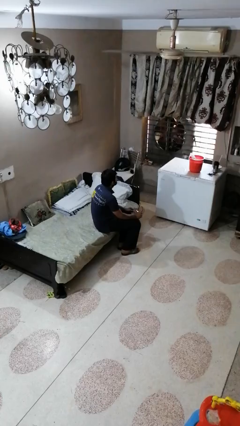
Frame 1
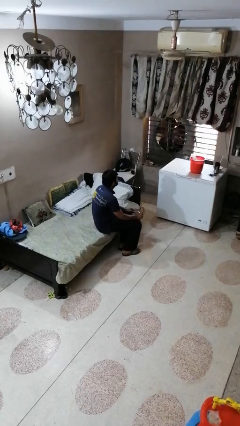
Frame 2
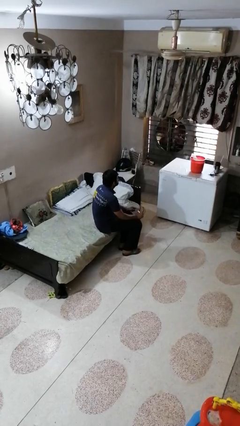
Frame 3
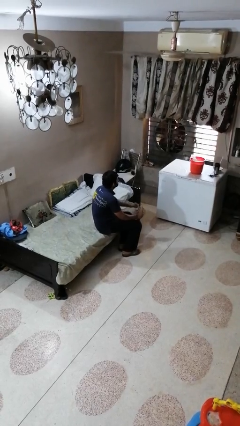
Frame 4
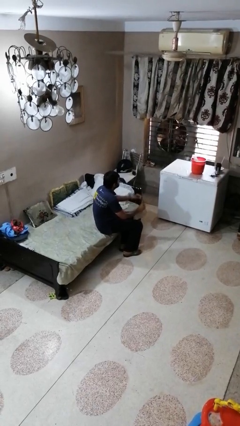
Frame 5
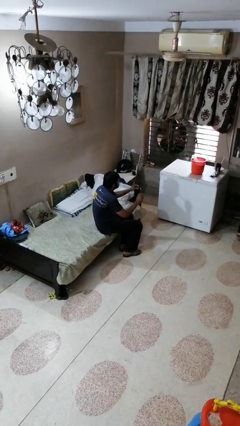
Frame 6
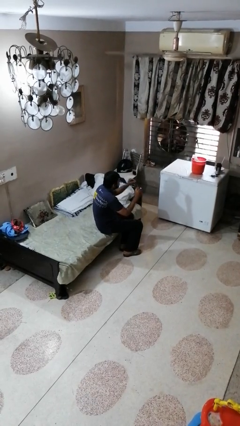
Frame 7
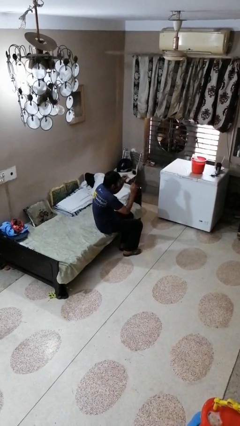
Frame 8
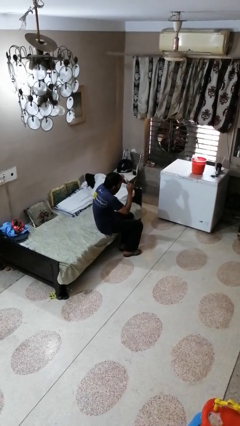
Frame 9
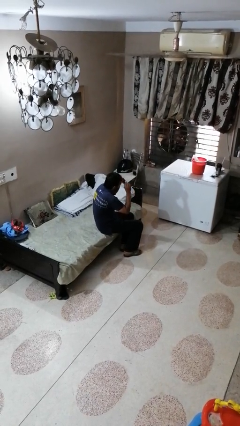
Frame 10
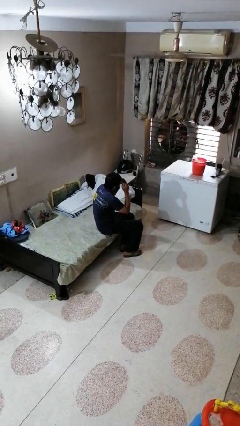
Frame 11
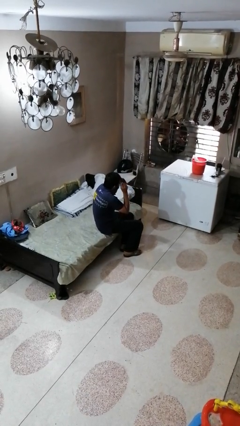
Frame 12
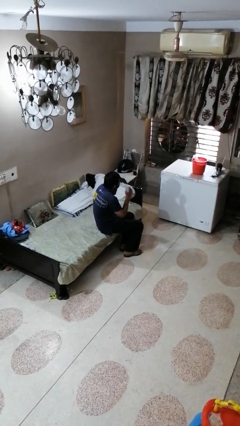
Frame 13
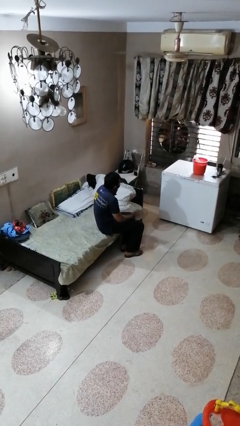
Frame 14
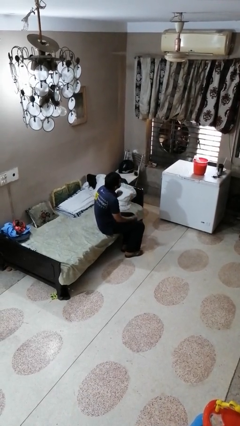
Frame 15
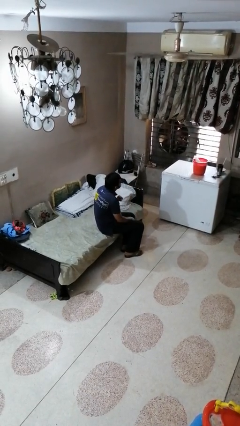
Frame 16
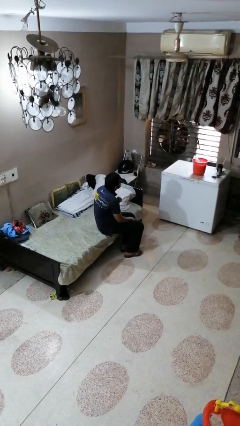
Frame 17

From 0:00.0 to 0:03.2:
person puts on glasses

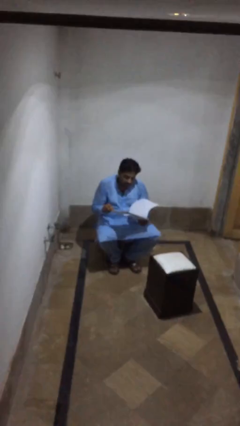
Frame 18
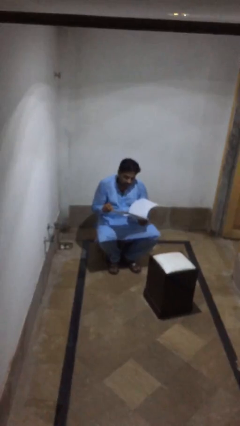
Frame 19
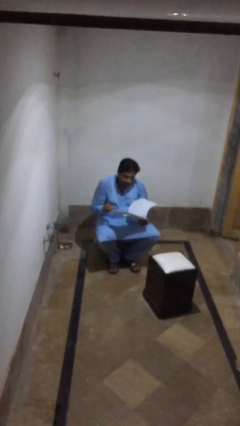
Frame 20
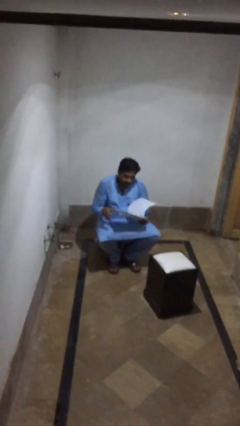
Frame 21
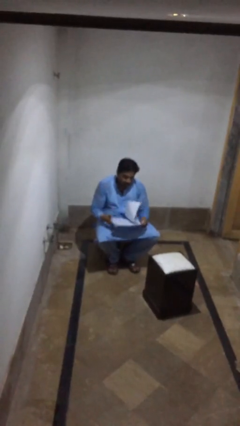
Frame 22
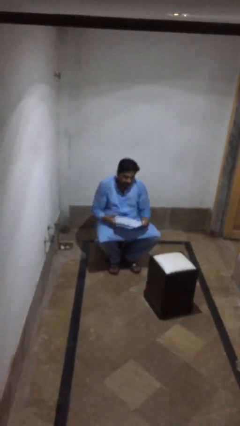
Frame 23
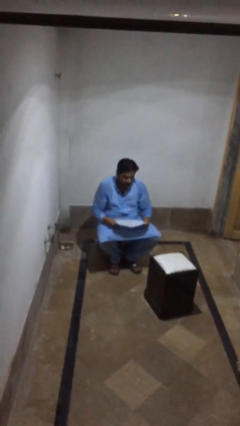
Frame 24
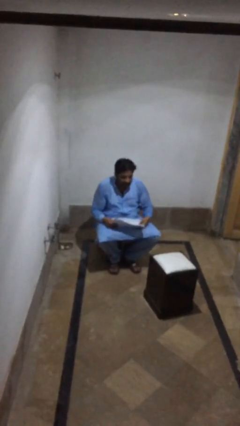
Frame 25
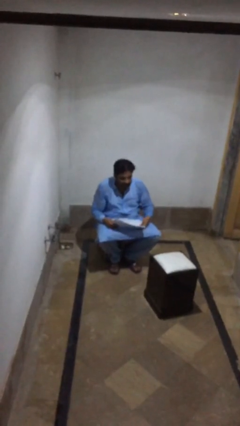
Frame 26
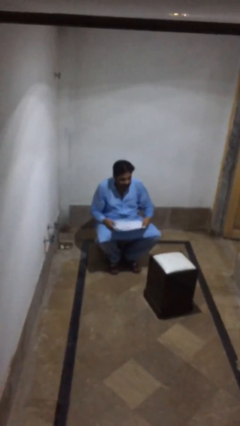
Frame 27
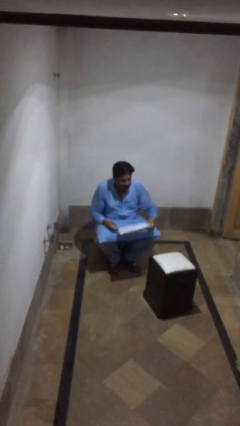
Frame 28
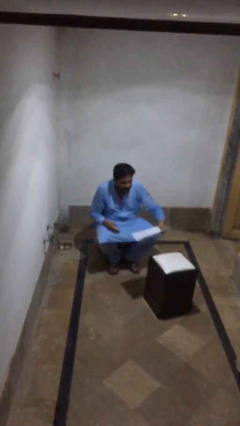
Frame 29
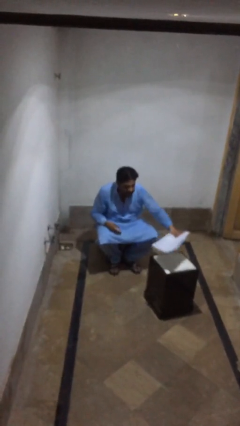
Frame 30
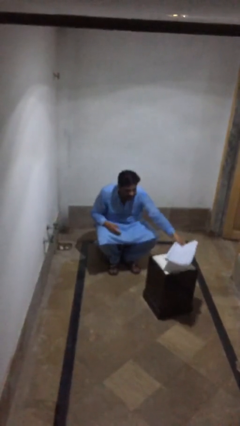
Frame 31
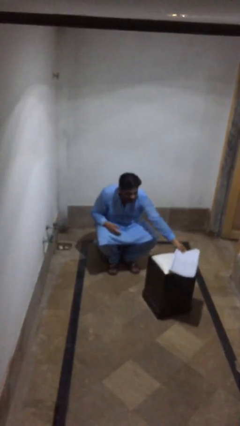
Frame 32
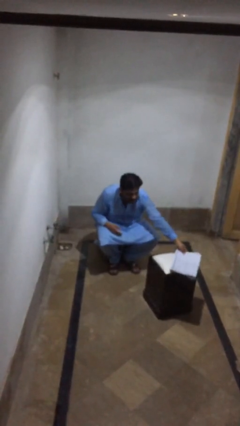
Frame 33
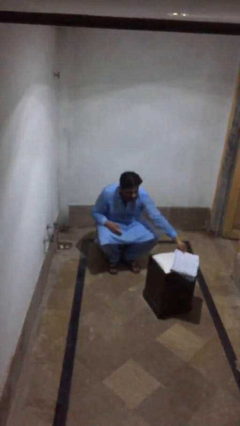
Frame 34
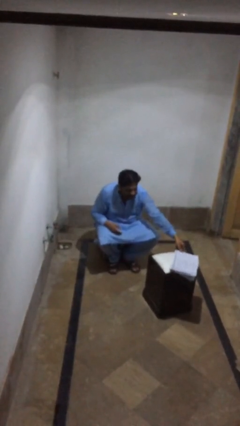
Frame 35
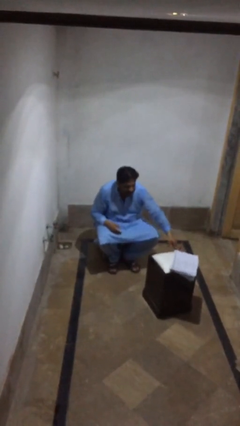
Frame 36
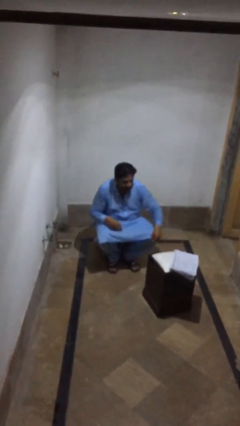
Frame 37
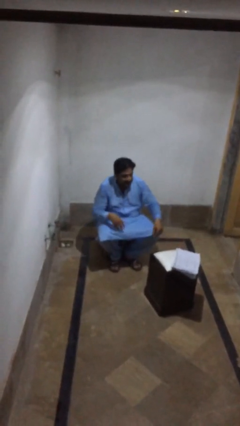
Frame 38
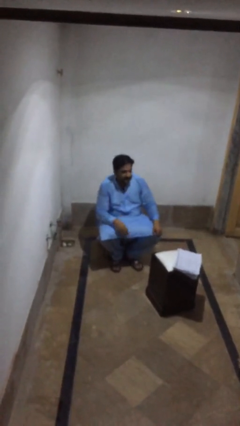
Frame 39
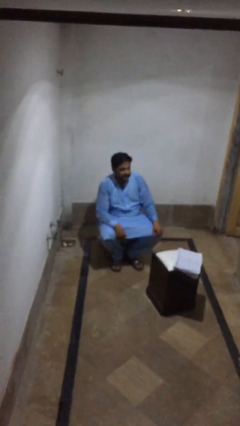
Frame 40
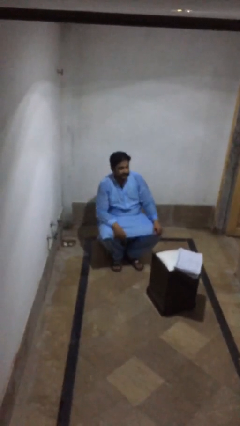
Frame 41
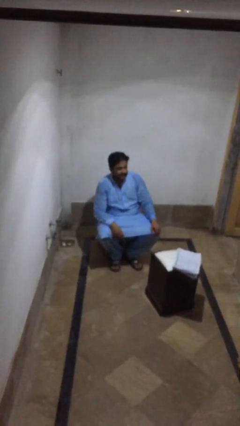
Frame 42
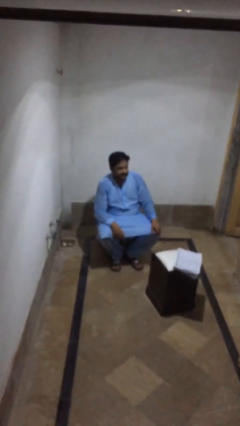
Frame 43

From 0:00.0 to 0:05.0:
person puts down object on table

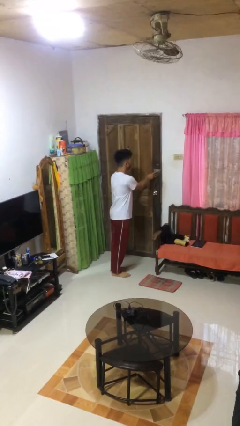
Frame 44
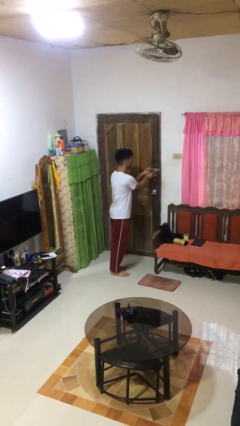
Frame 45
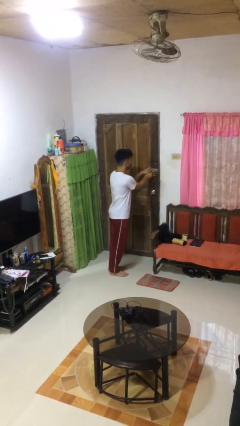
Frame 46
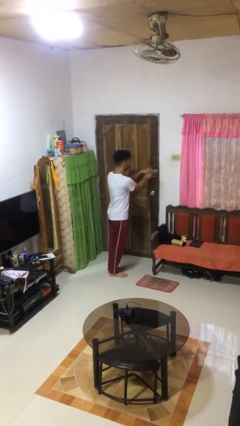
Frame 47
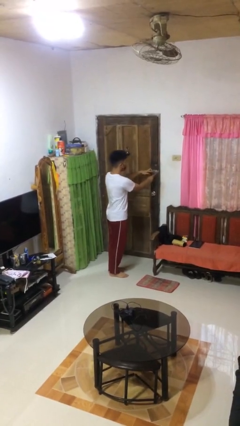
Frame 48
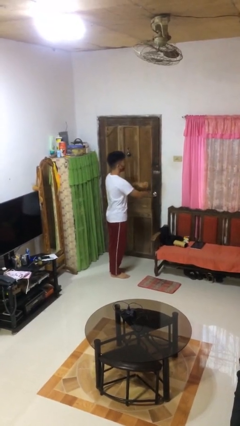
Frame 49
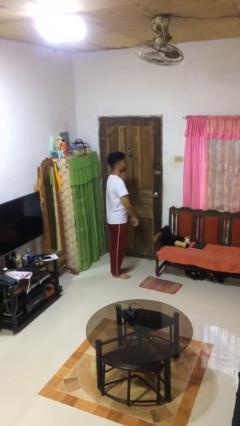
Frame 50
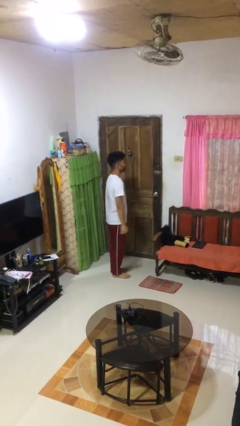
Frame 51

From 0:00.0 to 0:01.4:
person locks door with keys

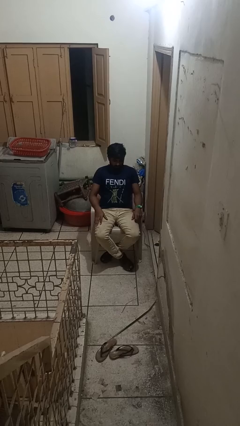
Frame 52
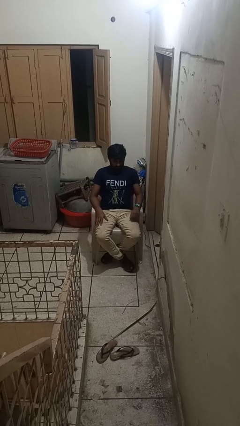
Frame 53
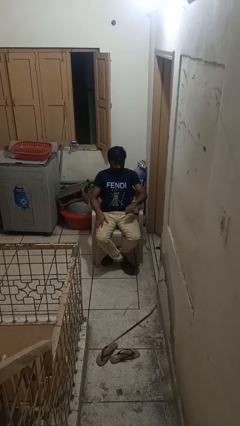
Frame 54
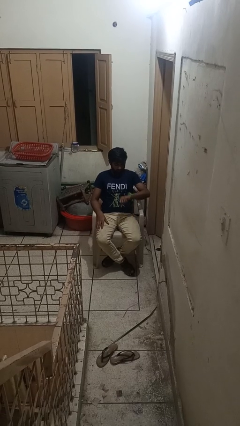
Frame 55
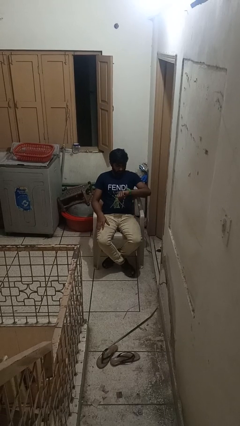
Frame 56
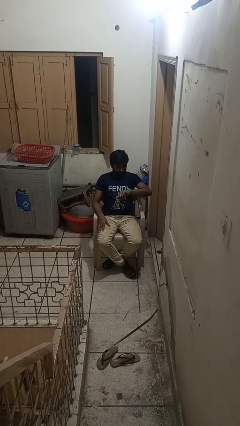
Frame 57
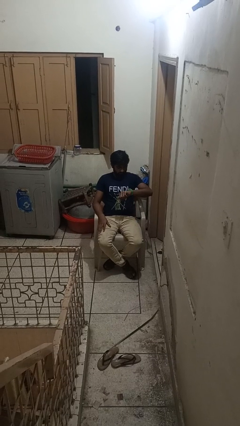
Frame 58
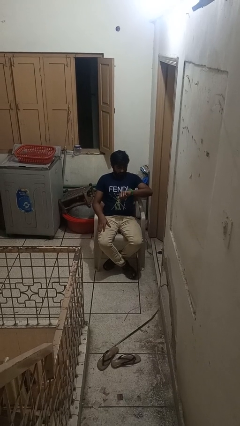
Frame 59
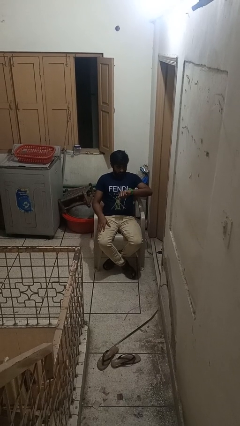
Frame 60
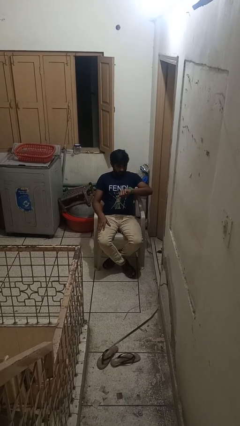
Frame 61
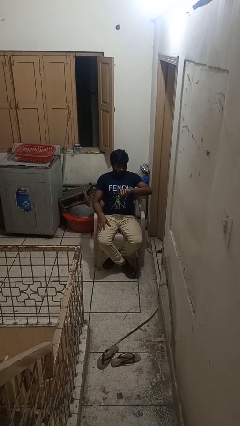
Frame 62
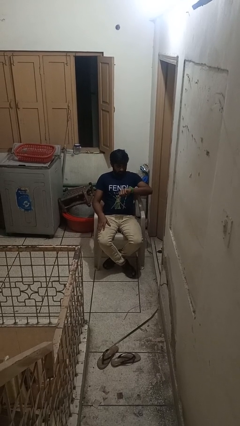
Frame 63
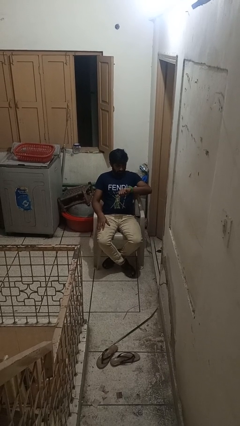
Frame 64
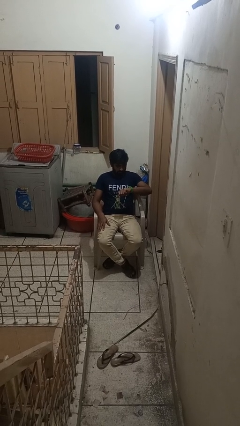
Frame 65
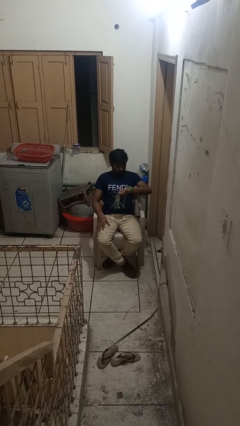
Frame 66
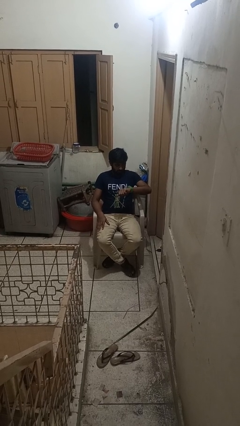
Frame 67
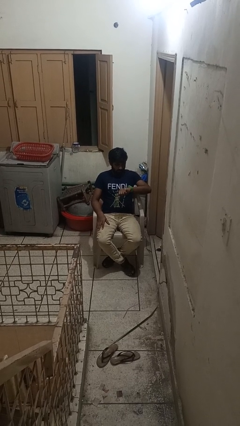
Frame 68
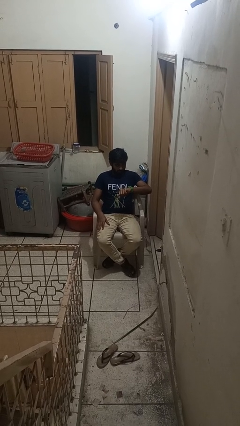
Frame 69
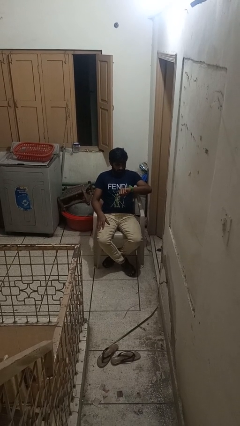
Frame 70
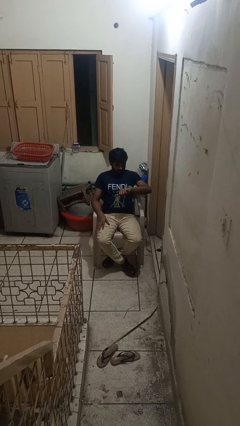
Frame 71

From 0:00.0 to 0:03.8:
person looks at wristwatch

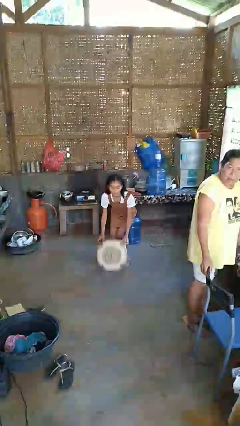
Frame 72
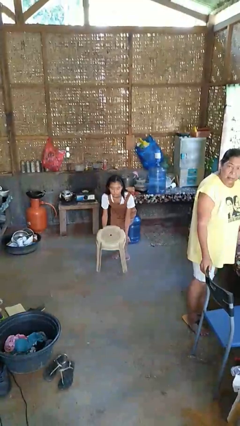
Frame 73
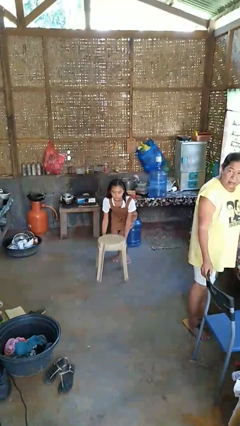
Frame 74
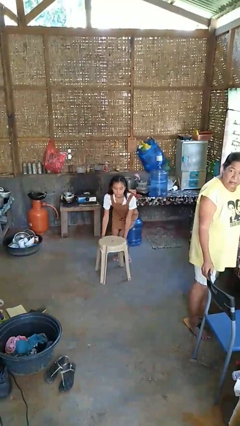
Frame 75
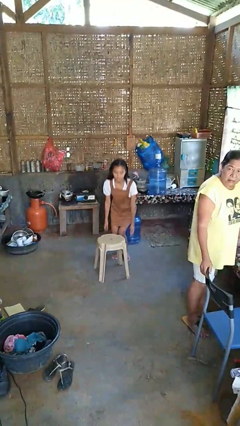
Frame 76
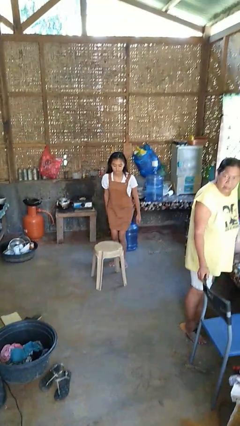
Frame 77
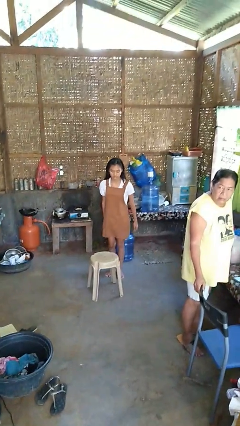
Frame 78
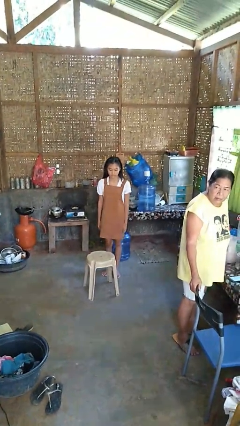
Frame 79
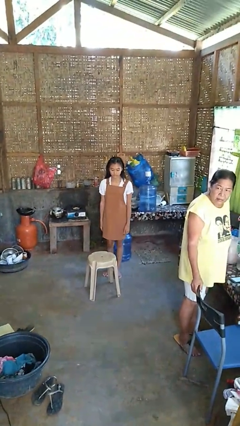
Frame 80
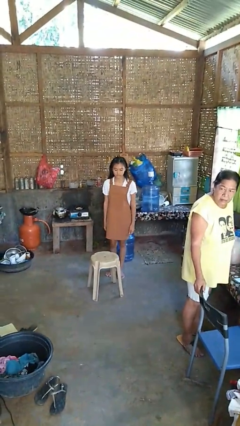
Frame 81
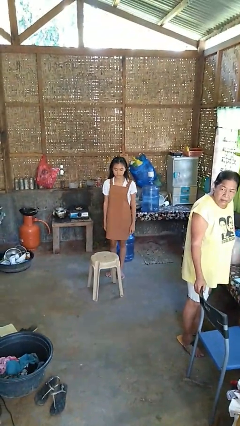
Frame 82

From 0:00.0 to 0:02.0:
person sets upright furniture

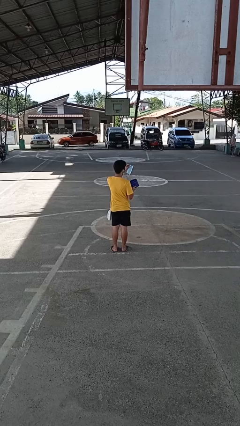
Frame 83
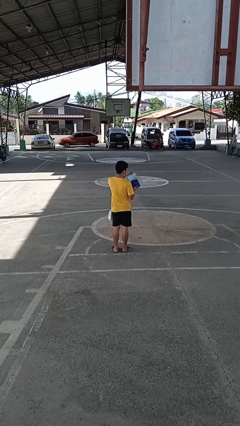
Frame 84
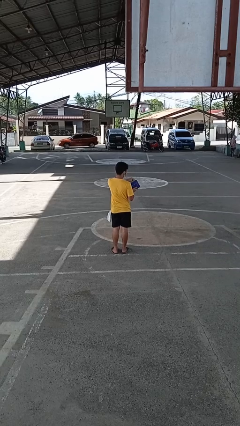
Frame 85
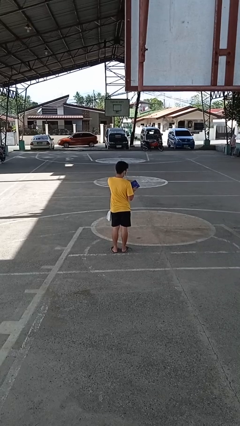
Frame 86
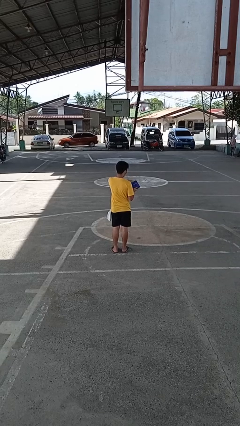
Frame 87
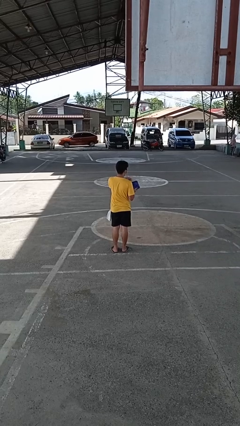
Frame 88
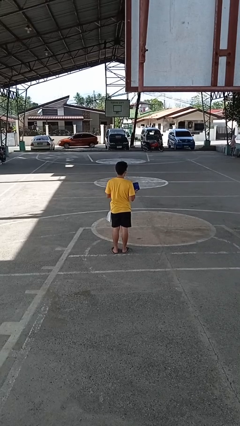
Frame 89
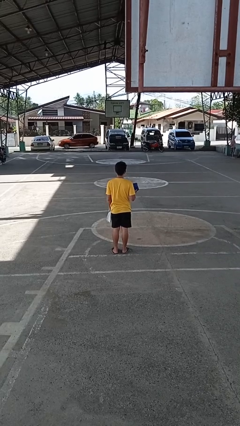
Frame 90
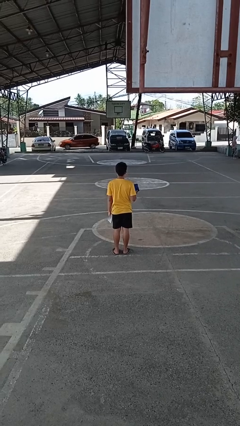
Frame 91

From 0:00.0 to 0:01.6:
person puts object into purse

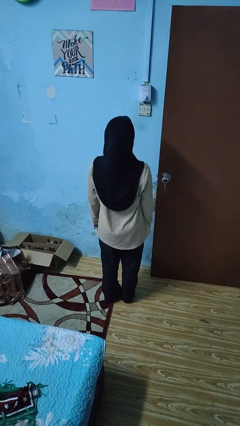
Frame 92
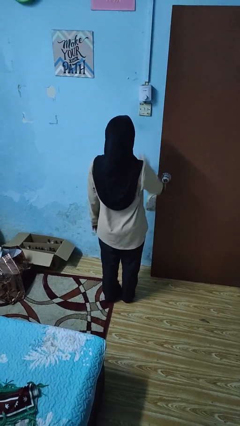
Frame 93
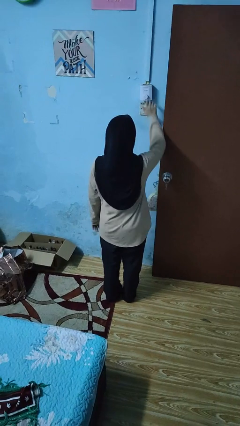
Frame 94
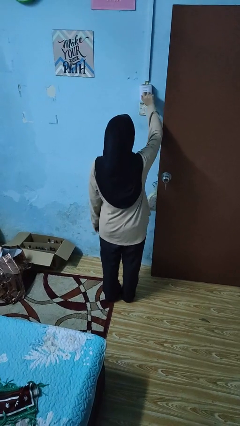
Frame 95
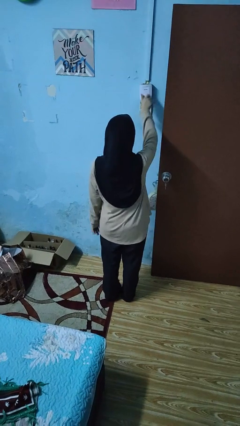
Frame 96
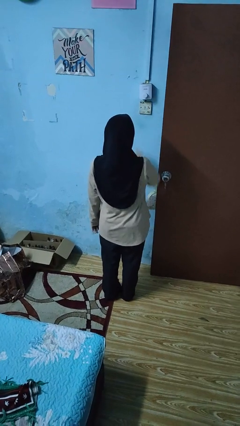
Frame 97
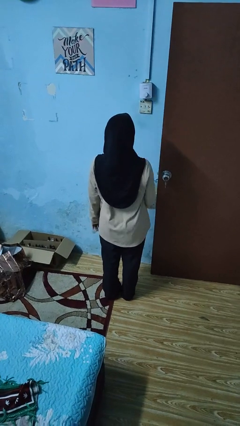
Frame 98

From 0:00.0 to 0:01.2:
person adjusts thermostat
